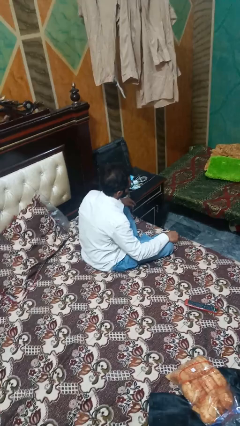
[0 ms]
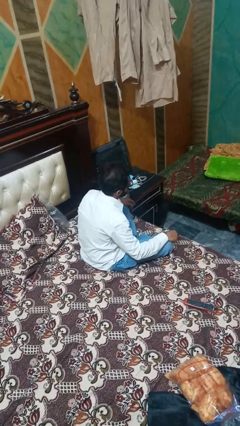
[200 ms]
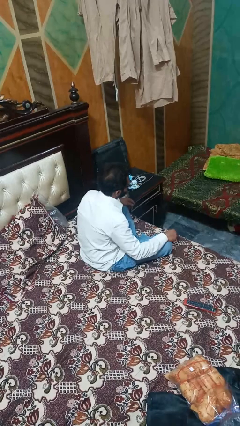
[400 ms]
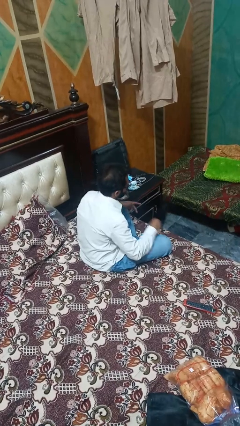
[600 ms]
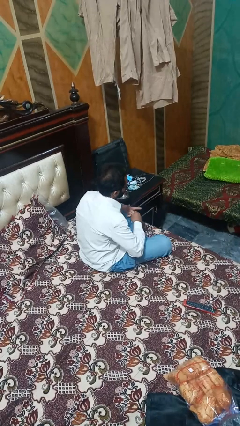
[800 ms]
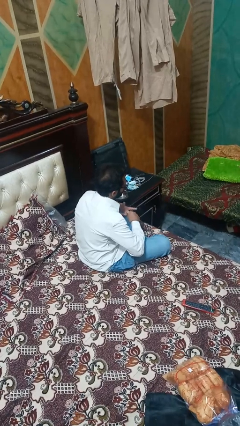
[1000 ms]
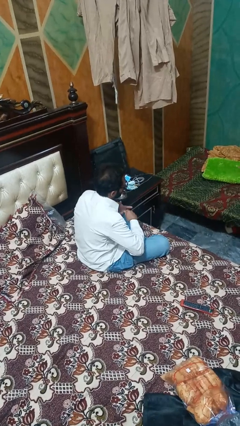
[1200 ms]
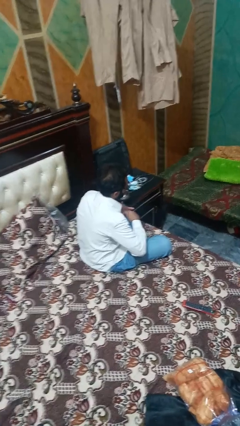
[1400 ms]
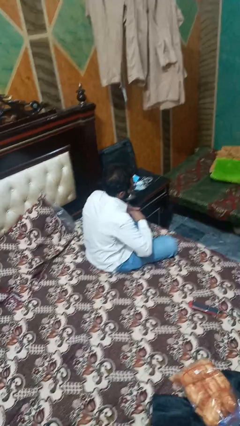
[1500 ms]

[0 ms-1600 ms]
person snaps fingers

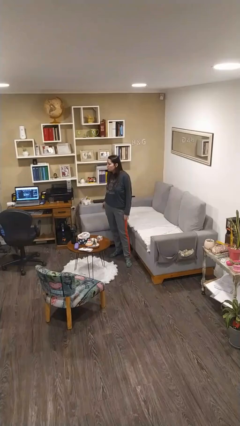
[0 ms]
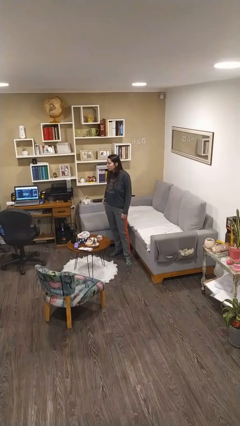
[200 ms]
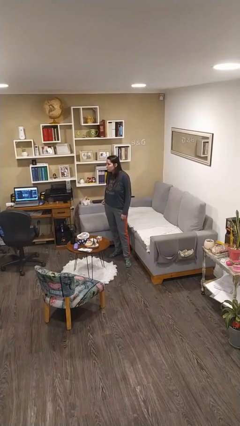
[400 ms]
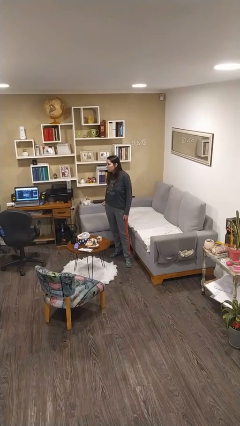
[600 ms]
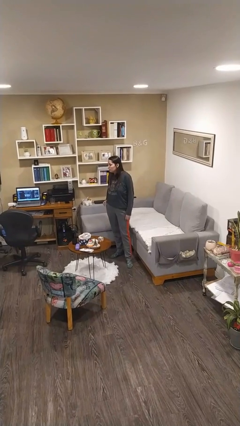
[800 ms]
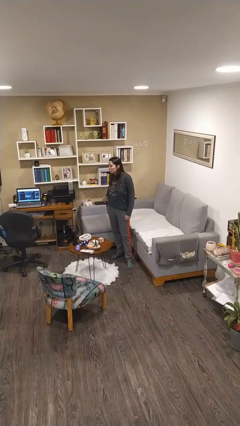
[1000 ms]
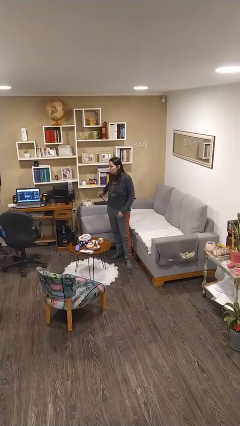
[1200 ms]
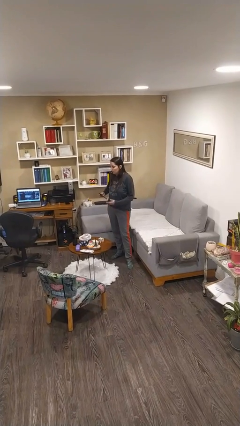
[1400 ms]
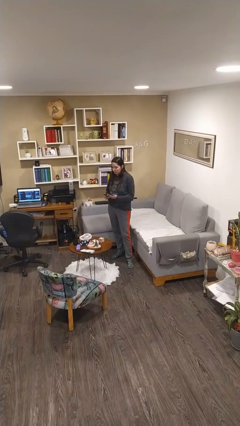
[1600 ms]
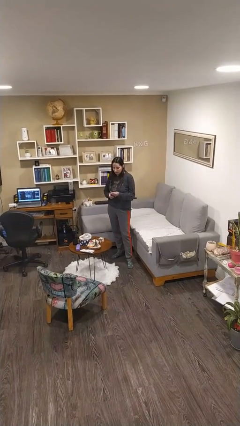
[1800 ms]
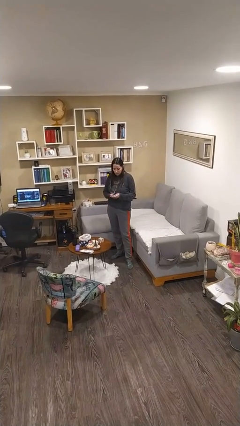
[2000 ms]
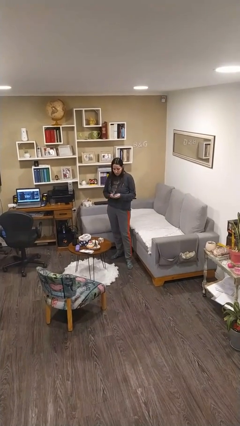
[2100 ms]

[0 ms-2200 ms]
person takes phone from pocket

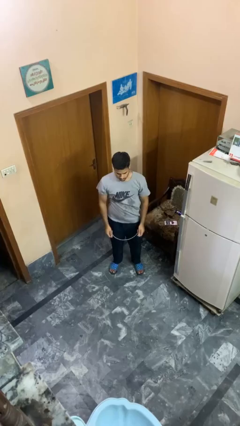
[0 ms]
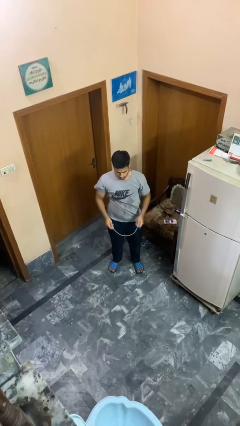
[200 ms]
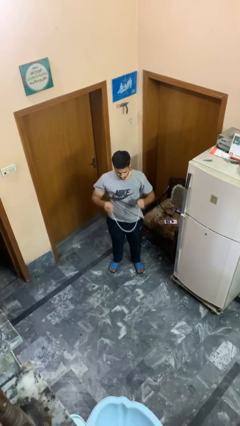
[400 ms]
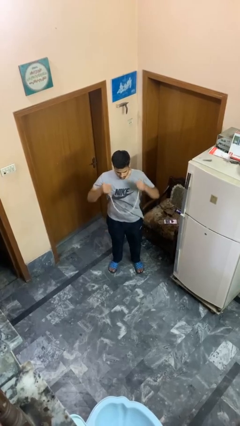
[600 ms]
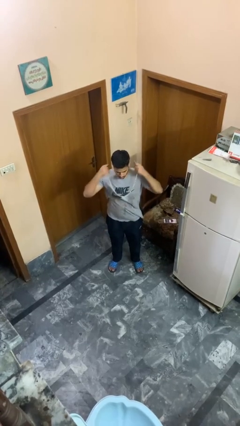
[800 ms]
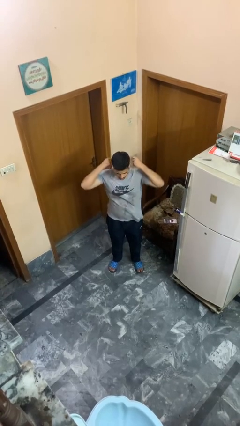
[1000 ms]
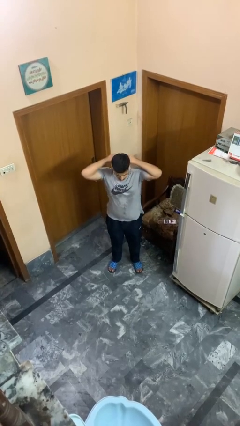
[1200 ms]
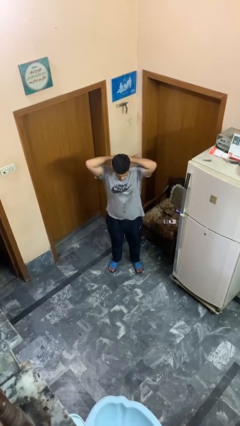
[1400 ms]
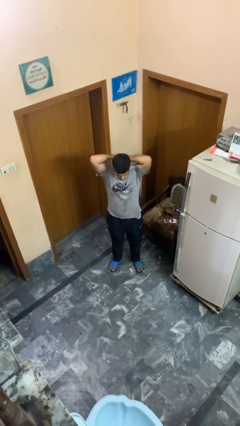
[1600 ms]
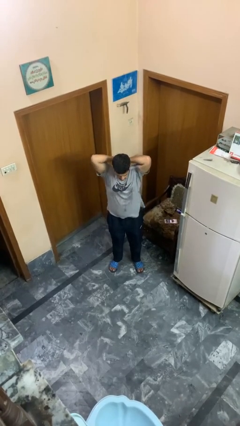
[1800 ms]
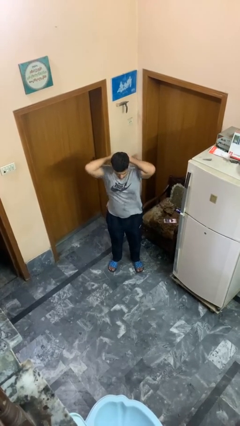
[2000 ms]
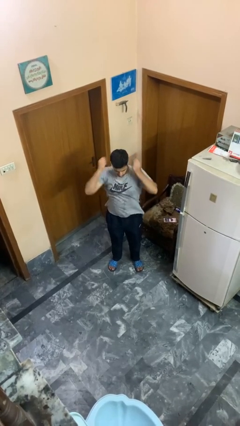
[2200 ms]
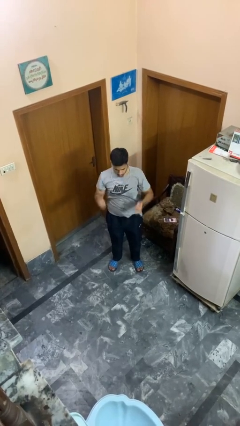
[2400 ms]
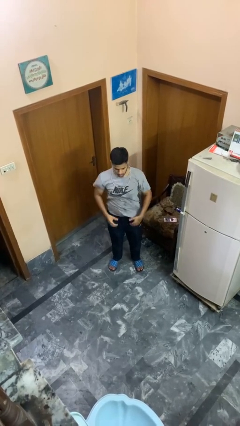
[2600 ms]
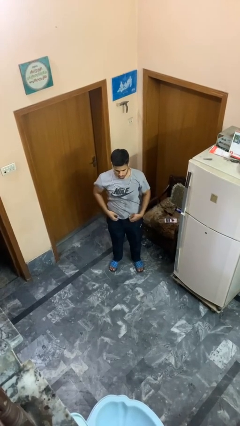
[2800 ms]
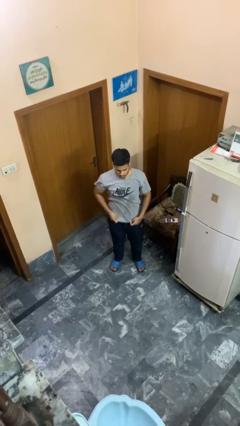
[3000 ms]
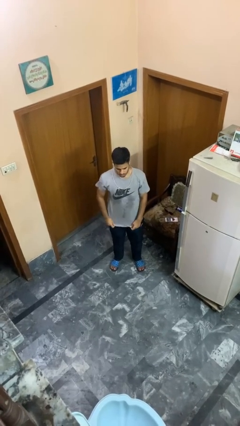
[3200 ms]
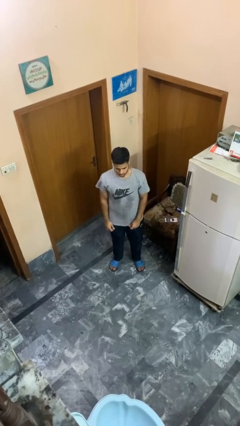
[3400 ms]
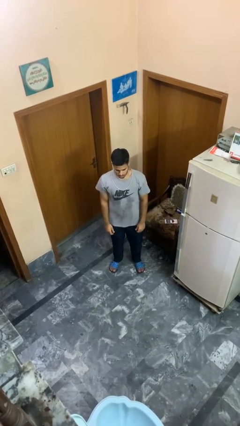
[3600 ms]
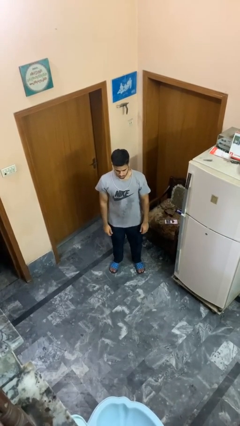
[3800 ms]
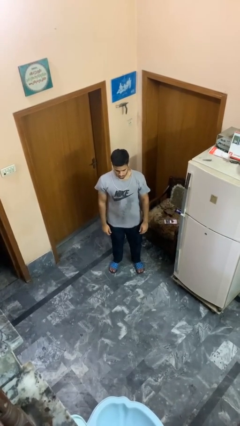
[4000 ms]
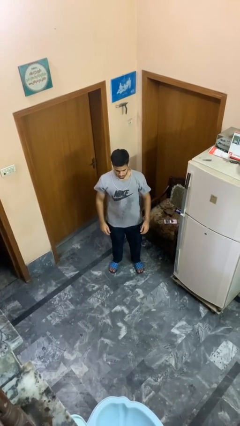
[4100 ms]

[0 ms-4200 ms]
person puts on necklace

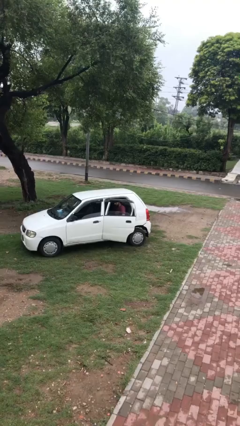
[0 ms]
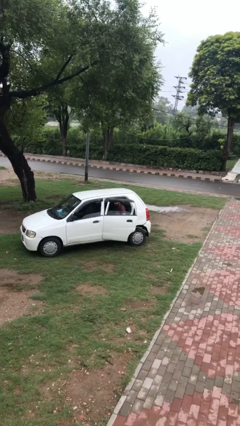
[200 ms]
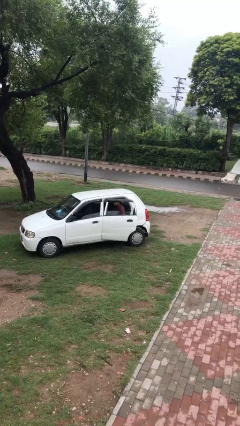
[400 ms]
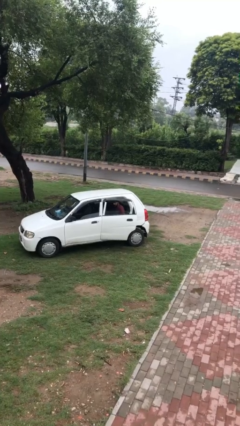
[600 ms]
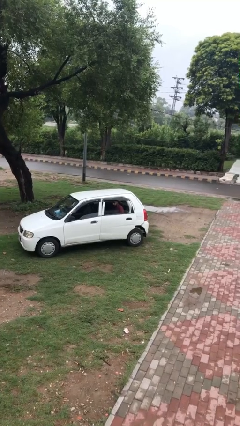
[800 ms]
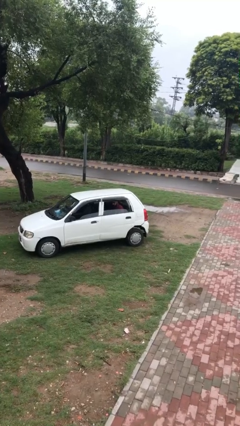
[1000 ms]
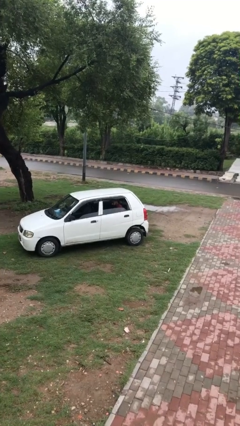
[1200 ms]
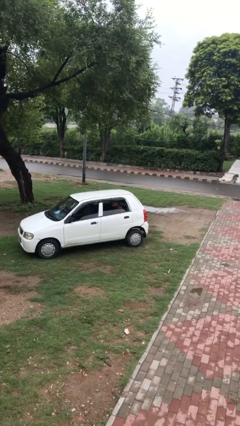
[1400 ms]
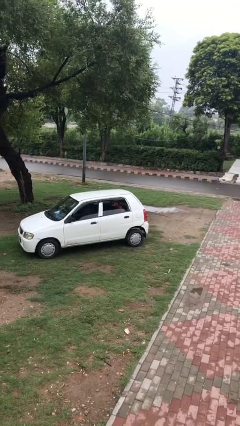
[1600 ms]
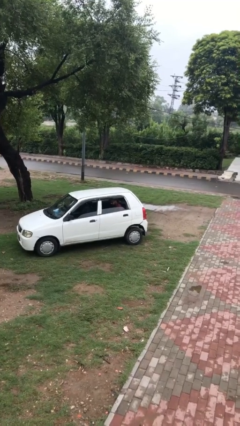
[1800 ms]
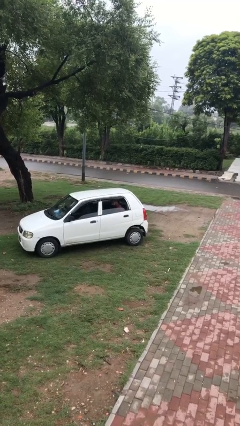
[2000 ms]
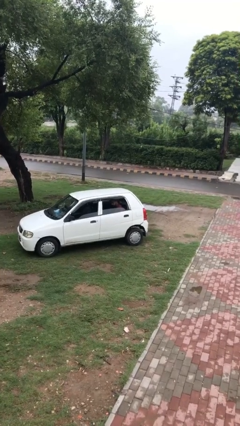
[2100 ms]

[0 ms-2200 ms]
person closes car door

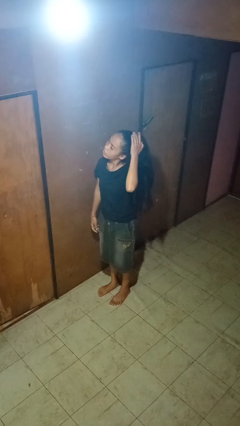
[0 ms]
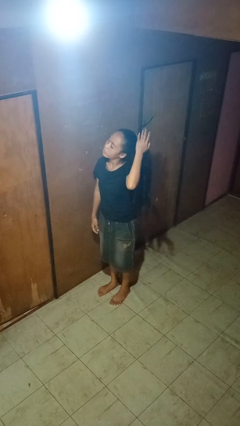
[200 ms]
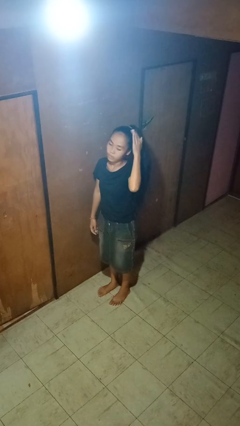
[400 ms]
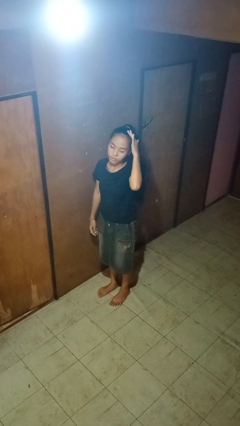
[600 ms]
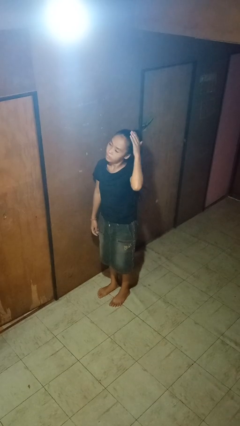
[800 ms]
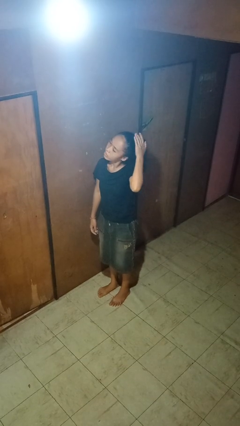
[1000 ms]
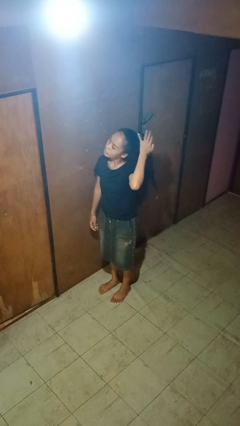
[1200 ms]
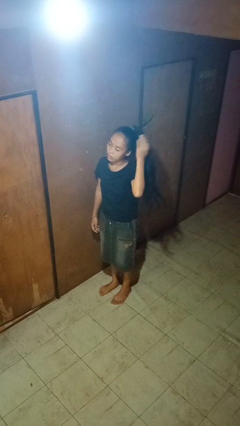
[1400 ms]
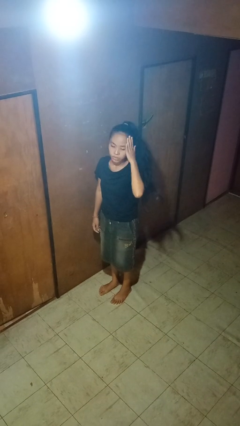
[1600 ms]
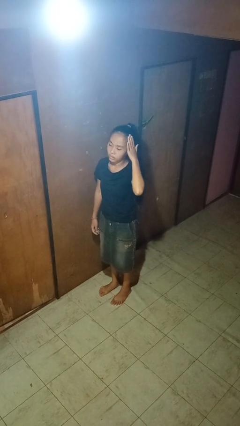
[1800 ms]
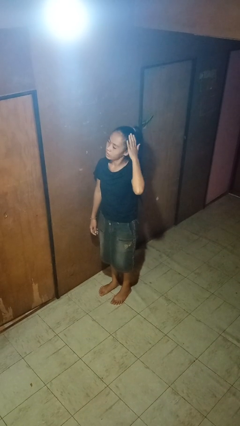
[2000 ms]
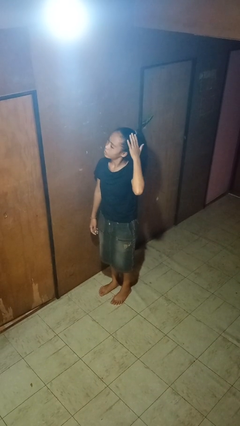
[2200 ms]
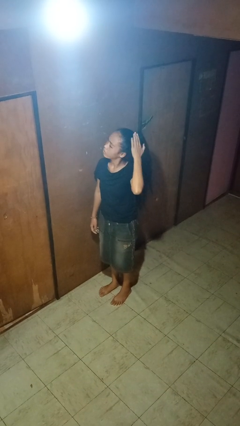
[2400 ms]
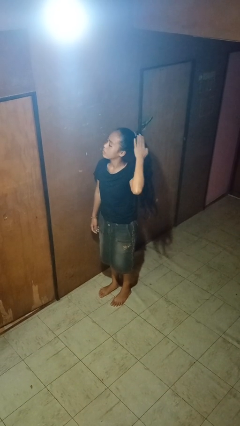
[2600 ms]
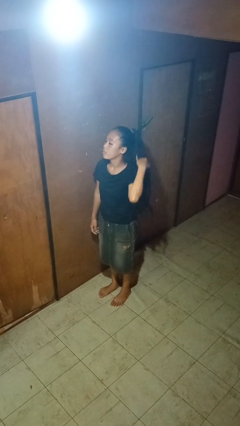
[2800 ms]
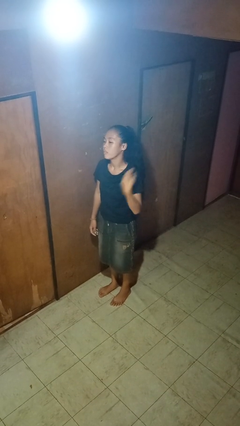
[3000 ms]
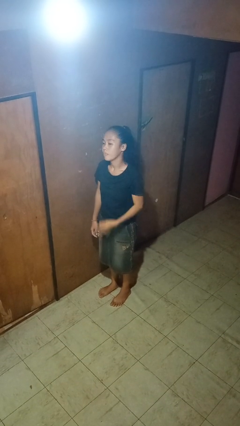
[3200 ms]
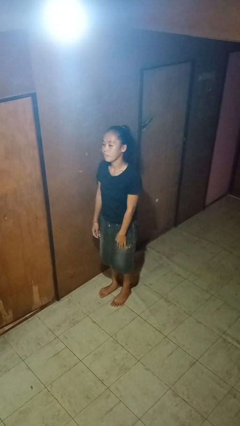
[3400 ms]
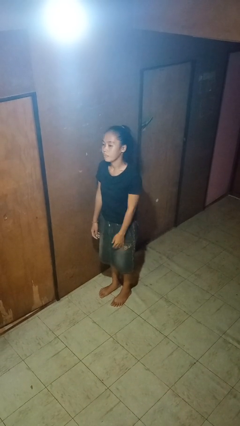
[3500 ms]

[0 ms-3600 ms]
person strokes hair

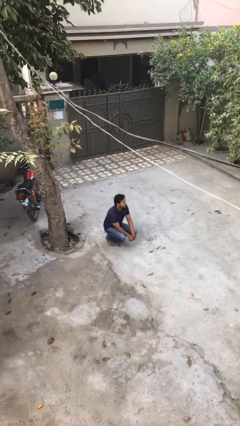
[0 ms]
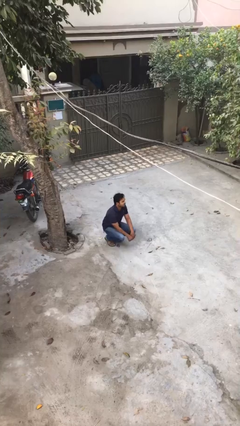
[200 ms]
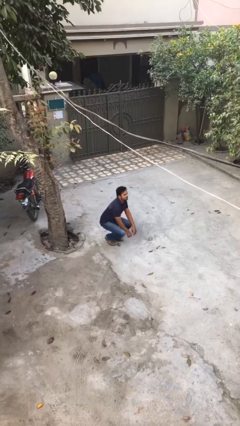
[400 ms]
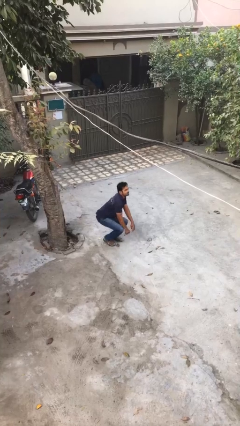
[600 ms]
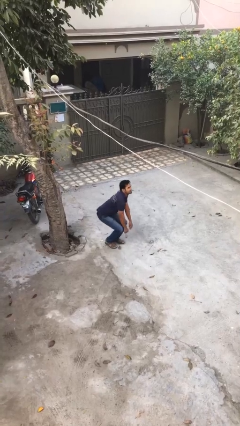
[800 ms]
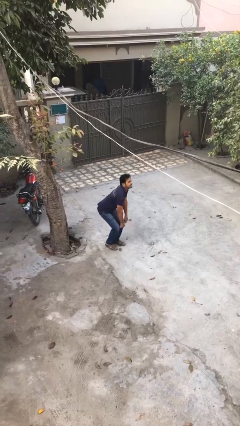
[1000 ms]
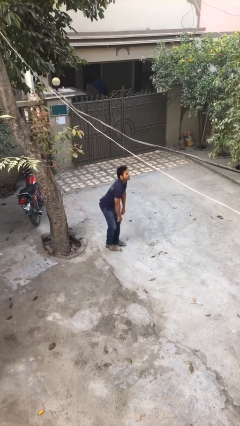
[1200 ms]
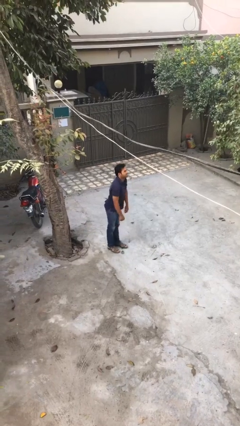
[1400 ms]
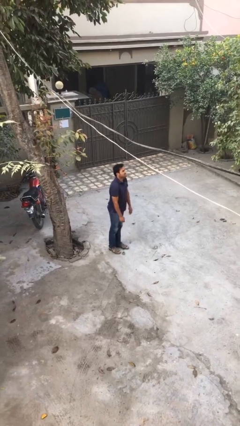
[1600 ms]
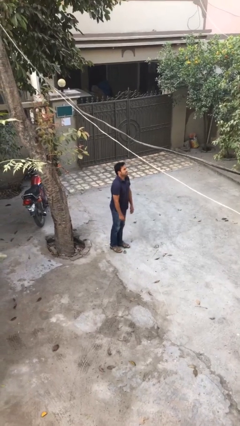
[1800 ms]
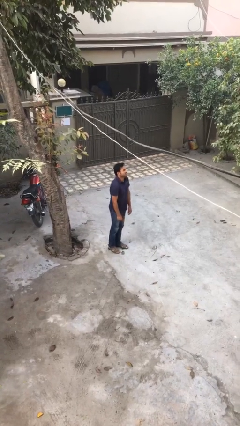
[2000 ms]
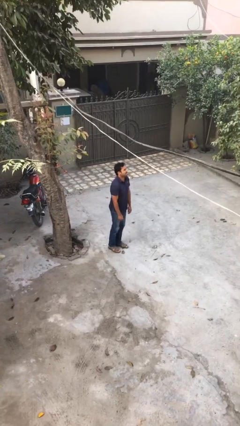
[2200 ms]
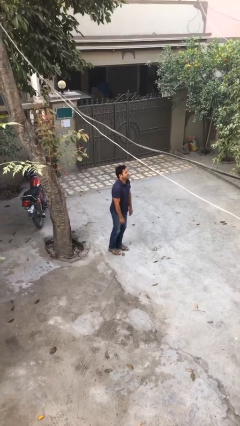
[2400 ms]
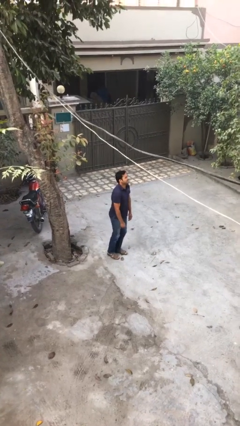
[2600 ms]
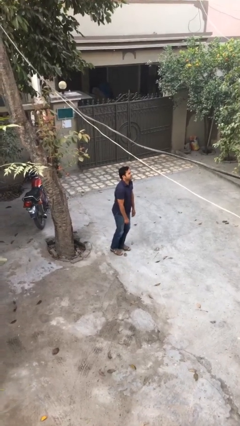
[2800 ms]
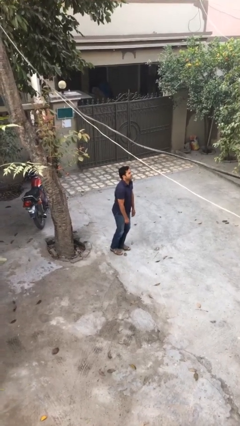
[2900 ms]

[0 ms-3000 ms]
person stands up

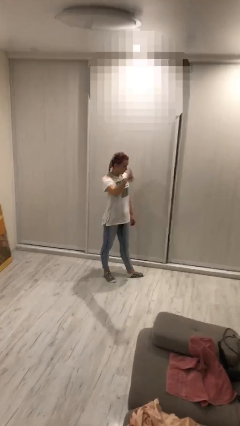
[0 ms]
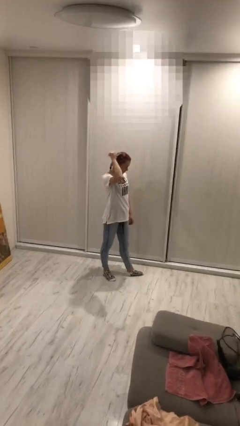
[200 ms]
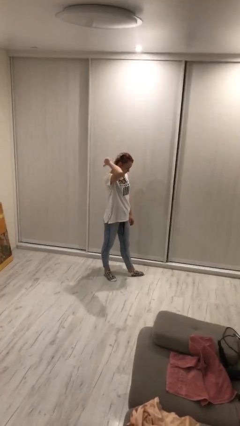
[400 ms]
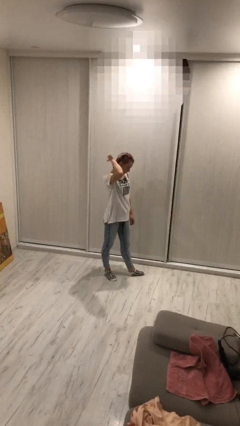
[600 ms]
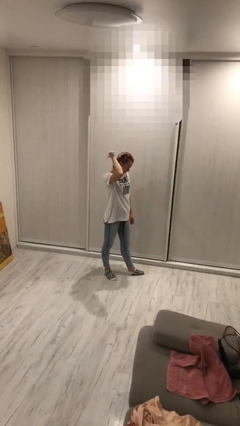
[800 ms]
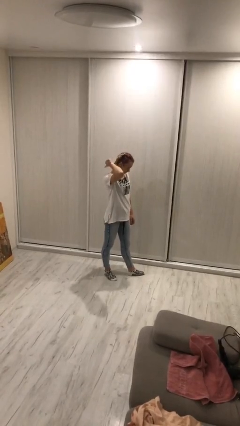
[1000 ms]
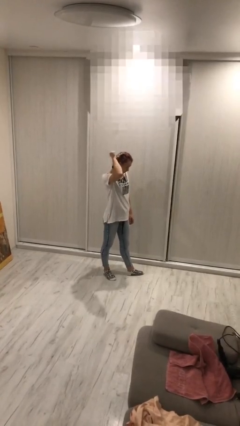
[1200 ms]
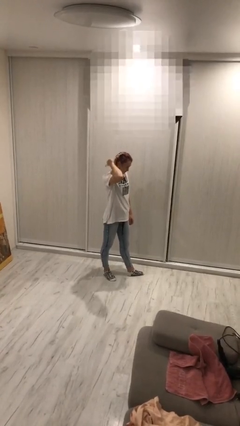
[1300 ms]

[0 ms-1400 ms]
person gestures behind me
